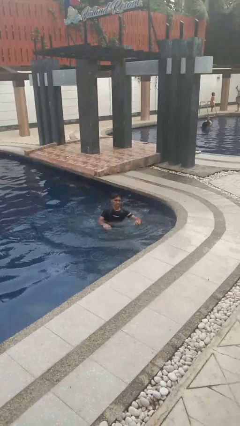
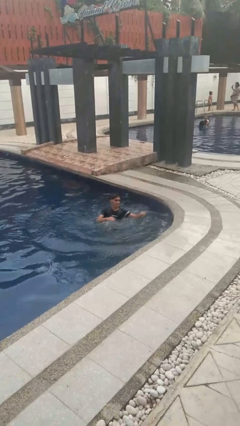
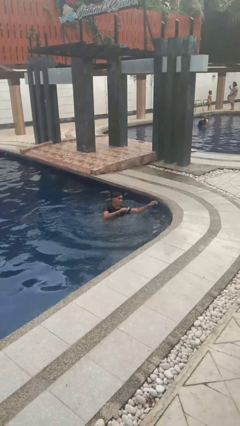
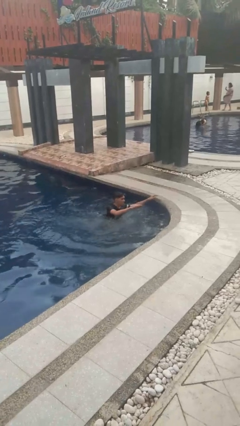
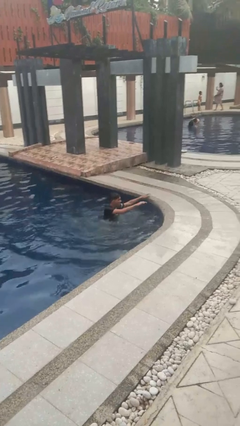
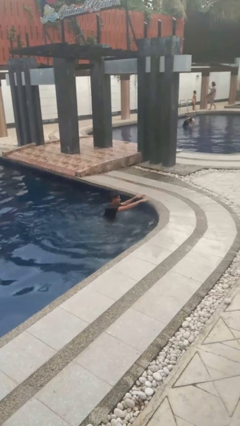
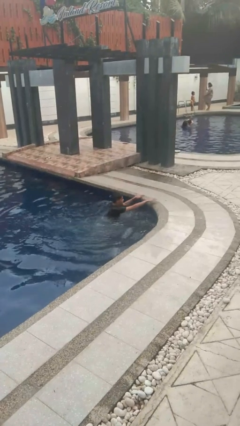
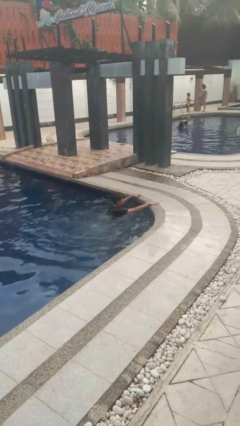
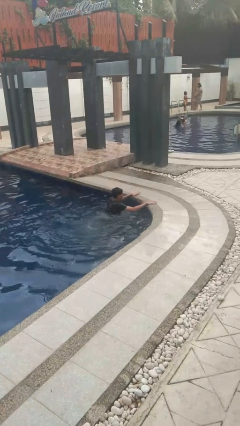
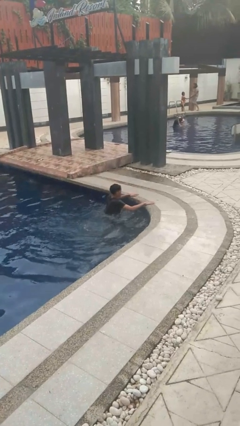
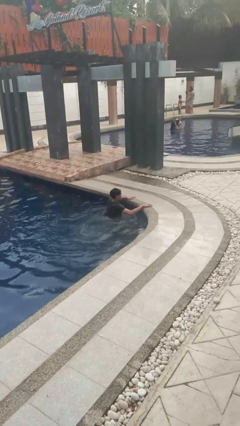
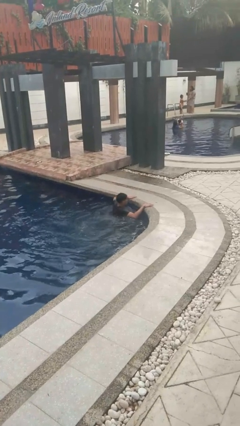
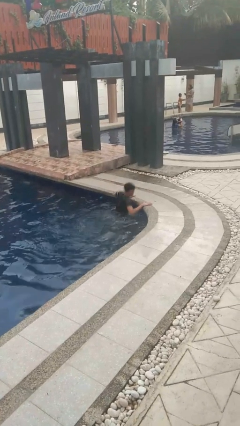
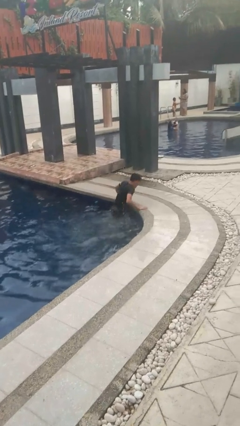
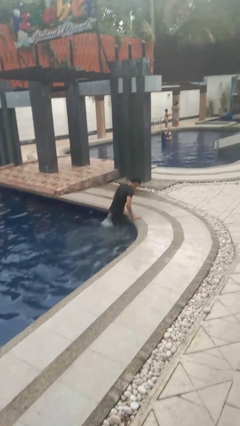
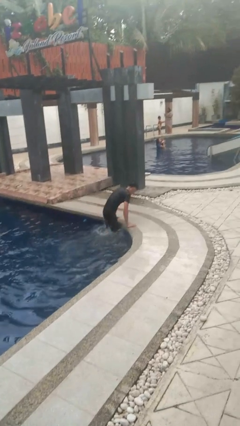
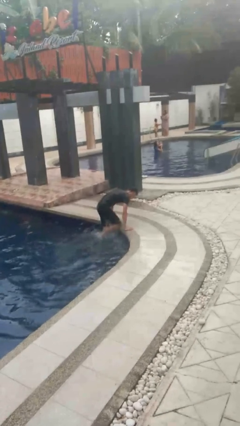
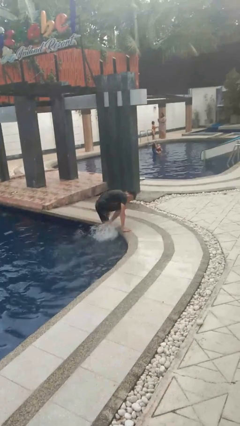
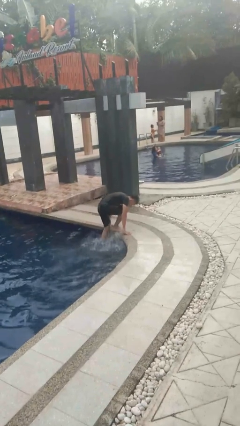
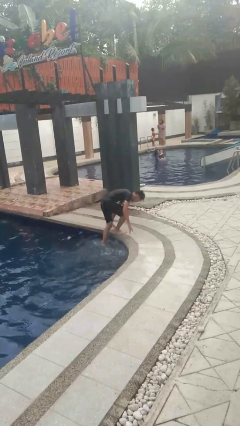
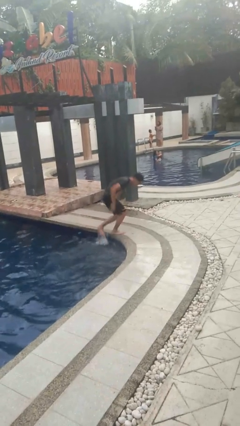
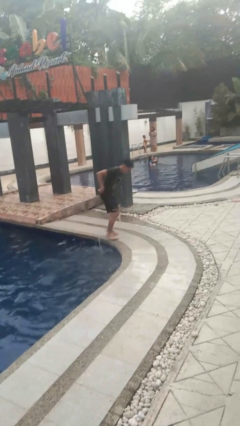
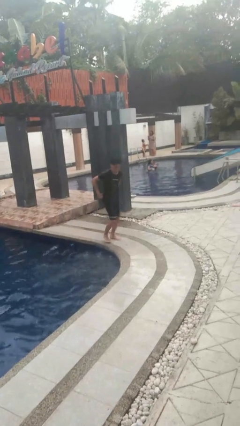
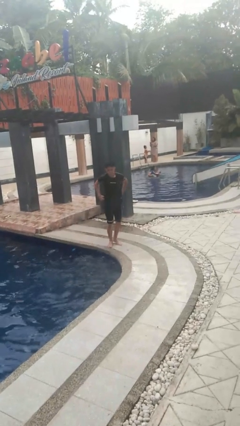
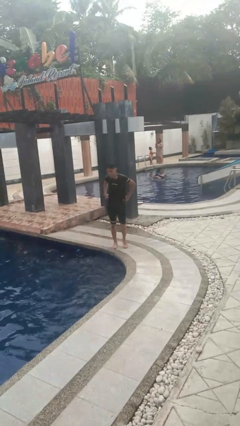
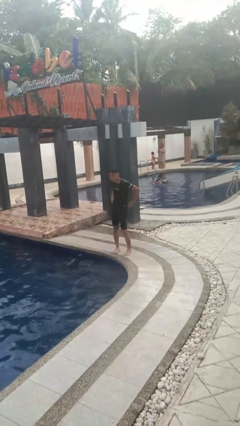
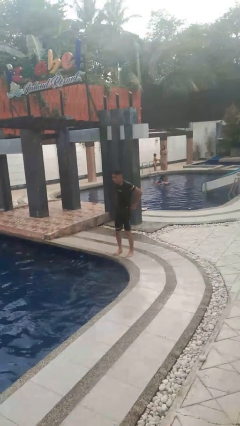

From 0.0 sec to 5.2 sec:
person exits pool

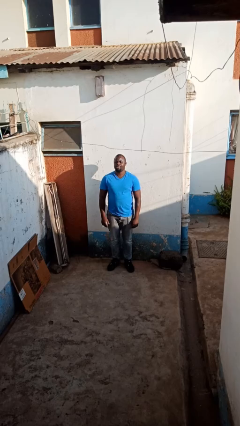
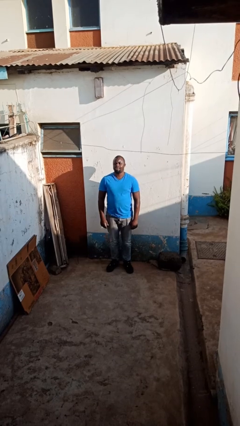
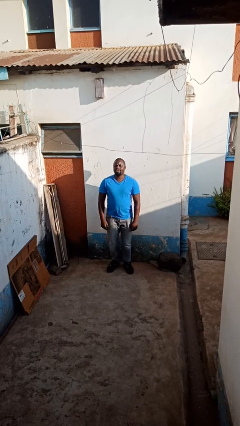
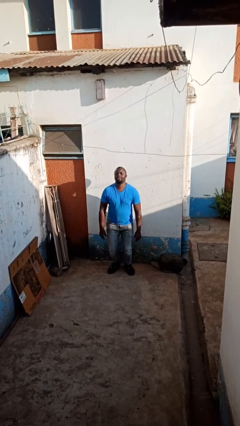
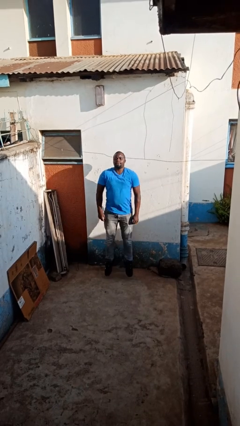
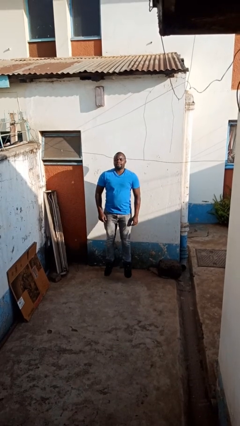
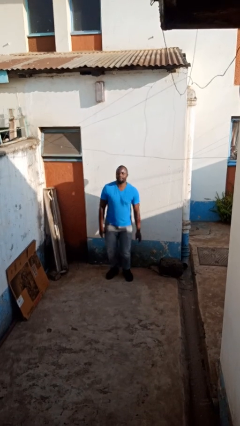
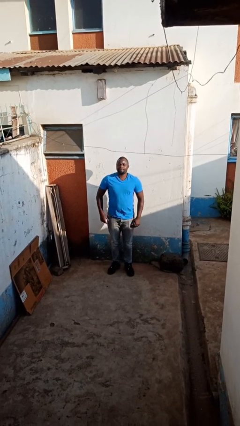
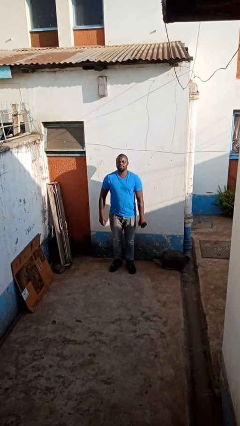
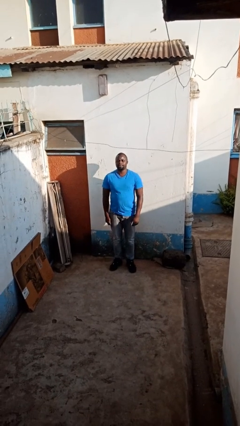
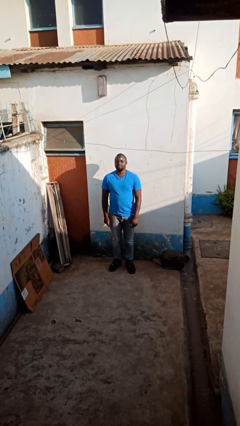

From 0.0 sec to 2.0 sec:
person jumps

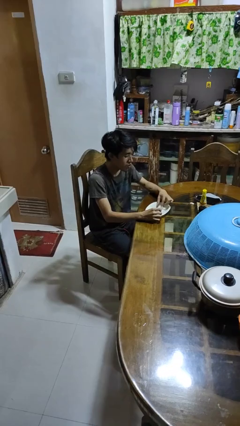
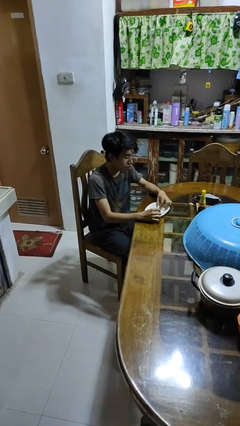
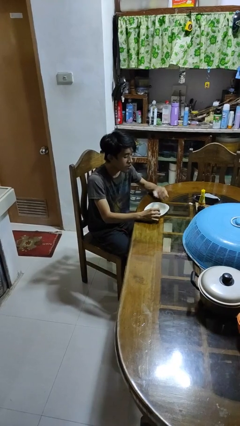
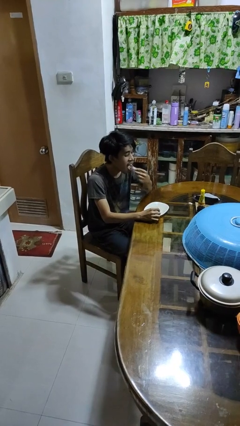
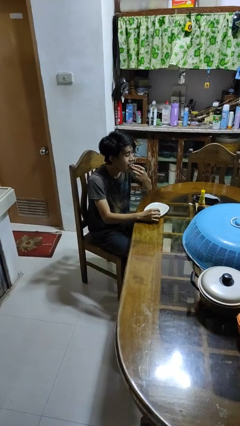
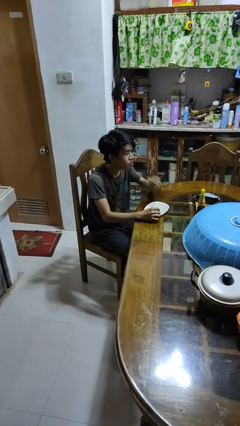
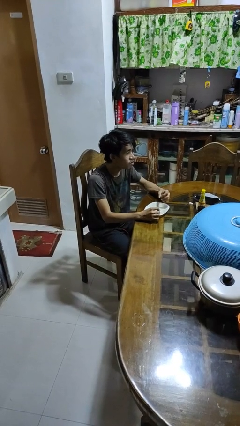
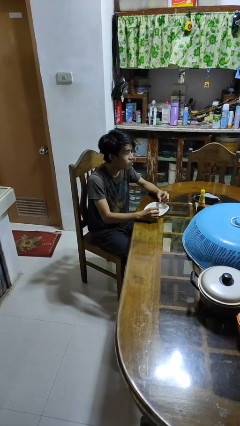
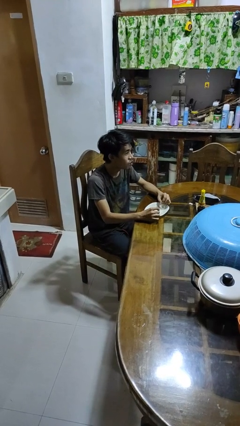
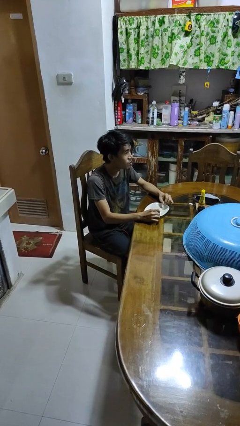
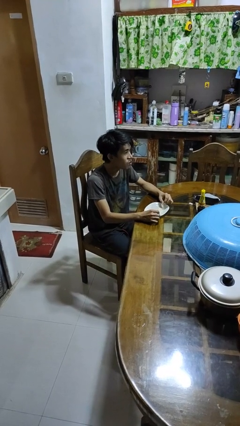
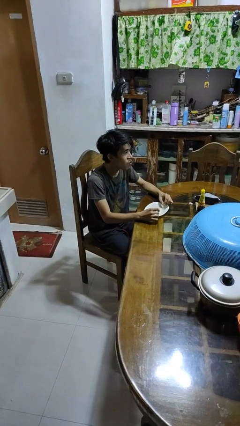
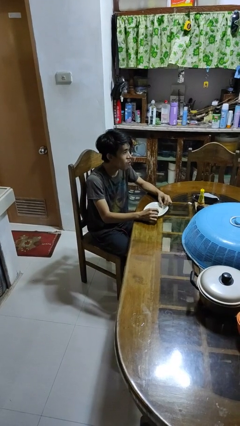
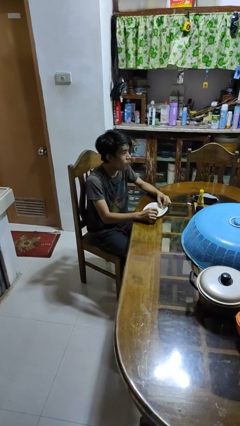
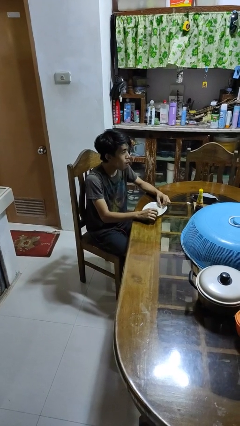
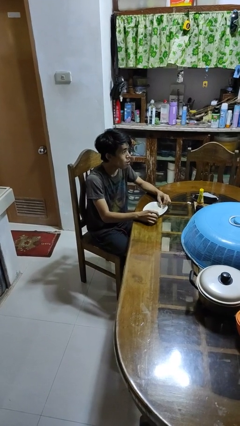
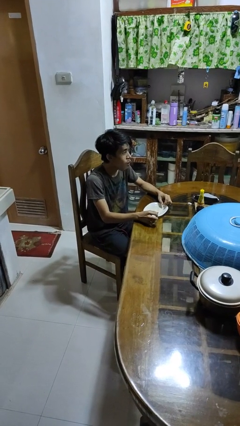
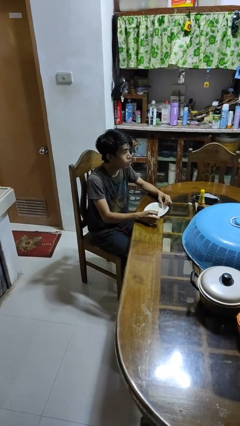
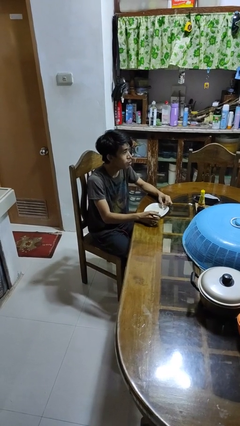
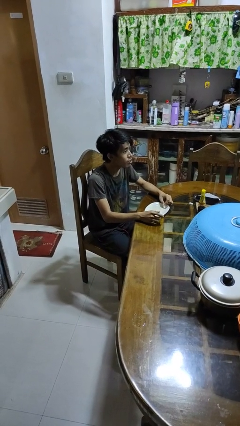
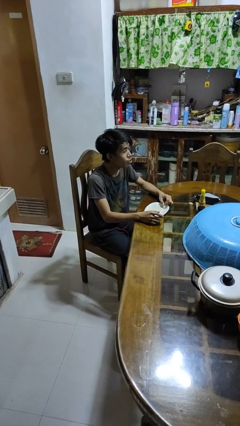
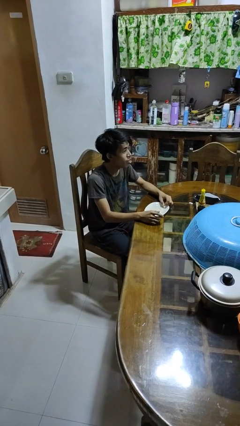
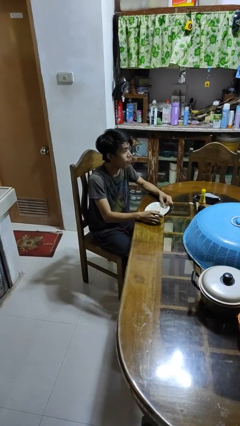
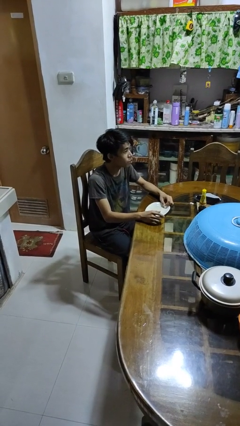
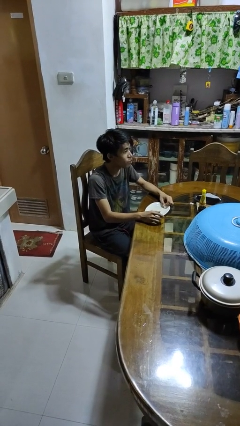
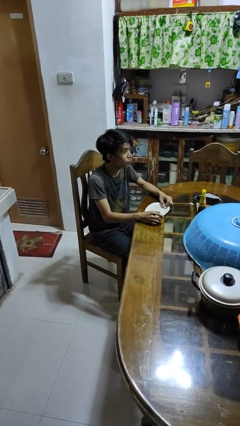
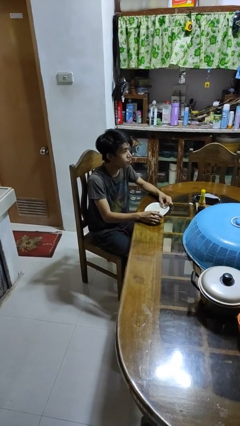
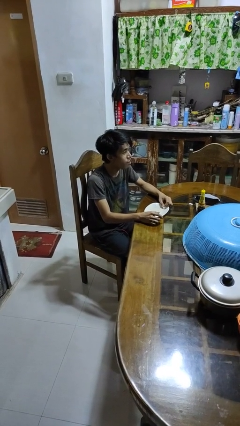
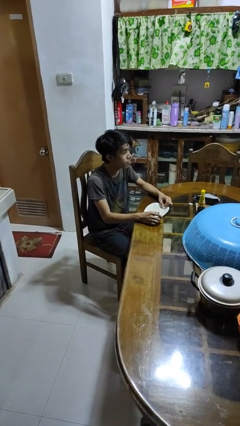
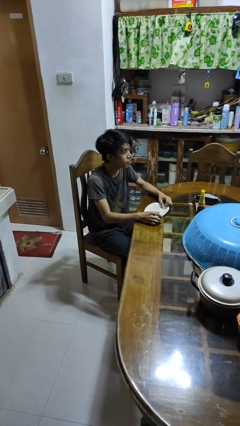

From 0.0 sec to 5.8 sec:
person eats with hands

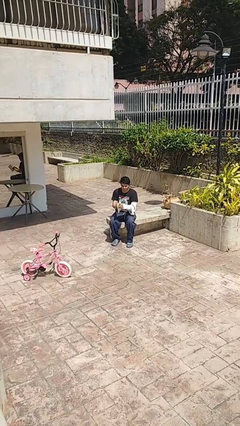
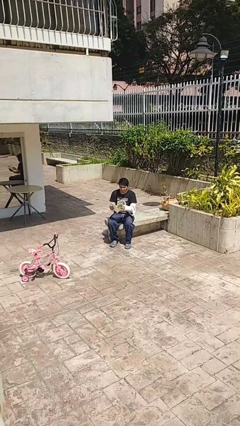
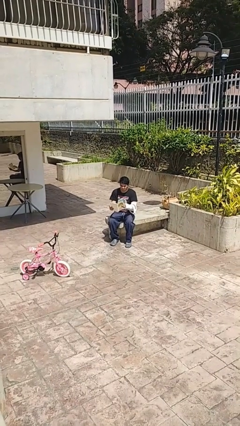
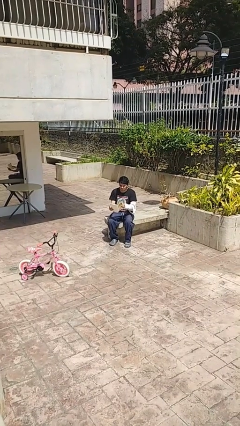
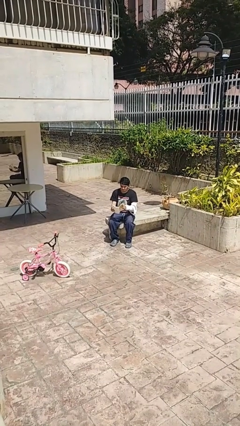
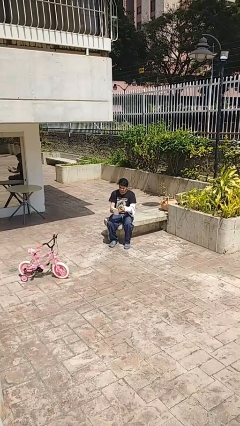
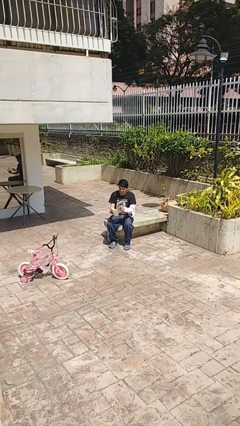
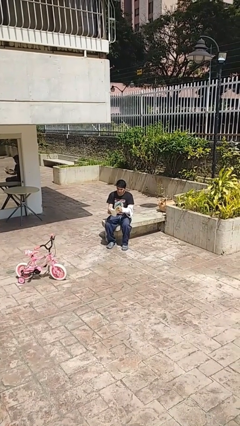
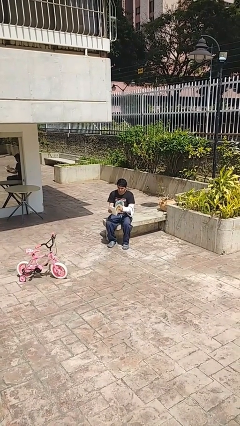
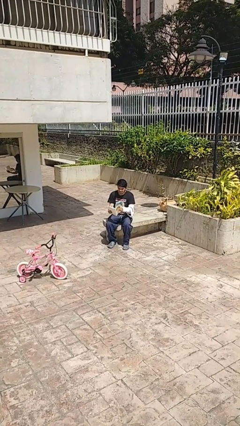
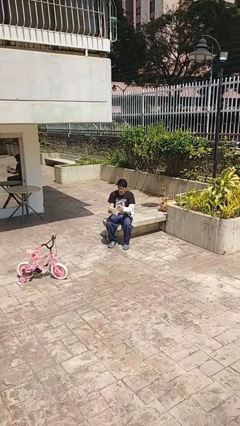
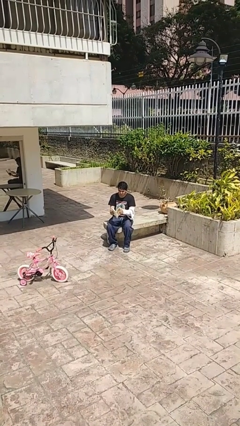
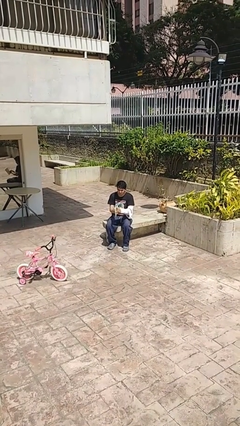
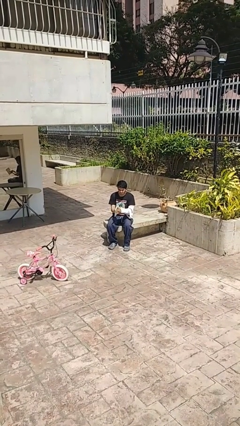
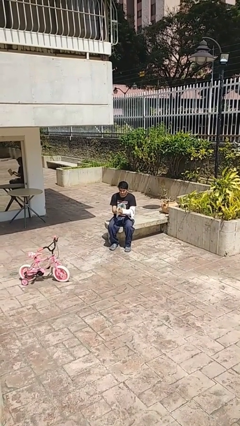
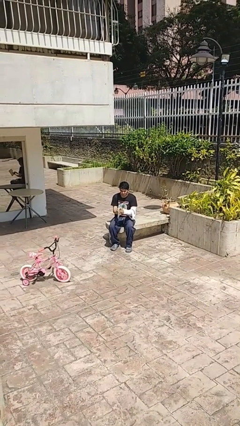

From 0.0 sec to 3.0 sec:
person reads document

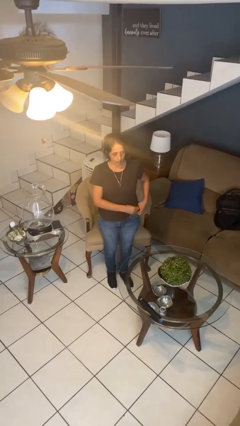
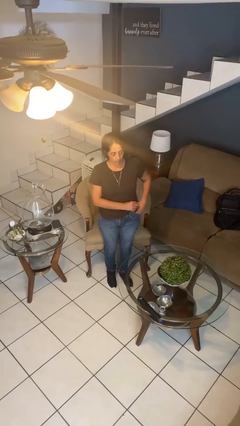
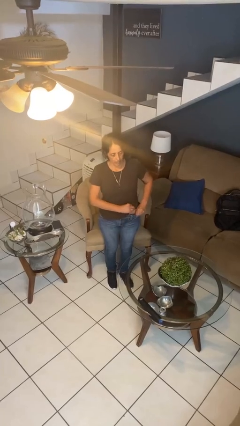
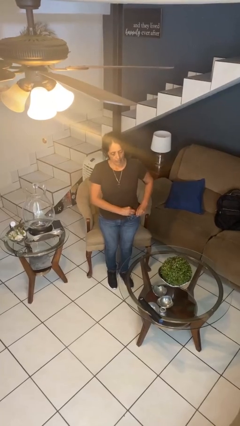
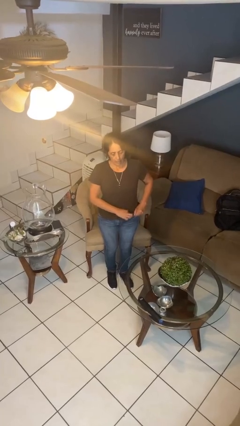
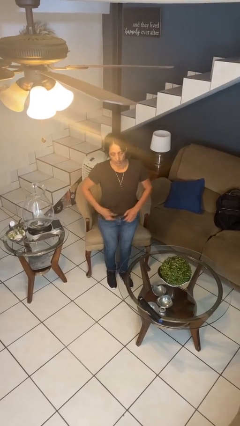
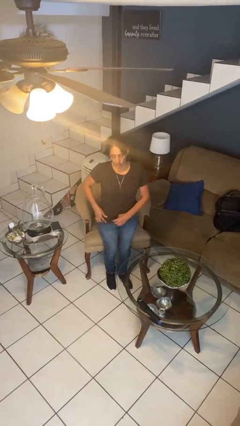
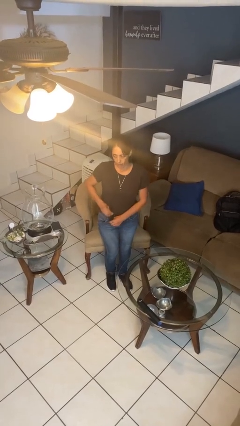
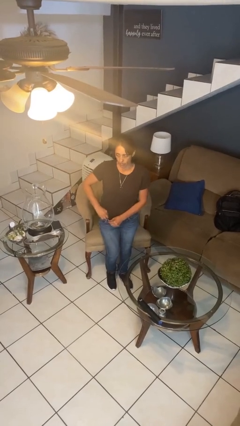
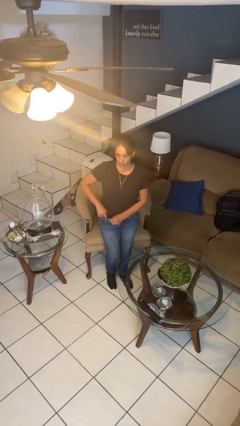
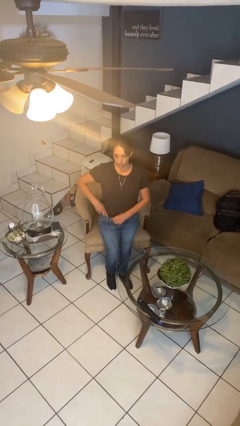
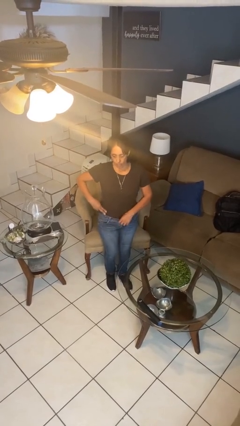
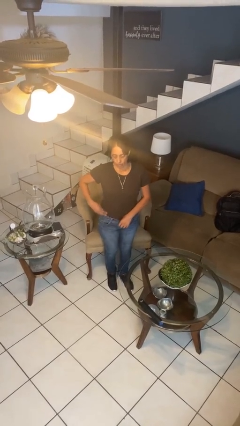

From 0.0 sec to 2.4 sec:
person tucks in shirt
